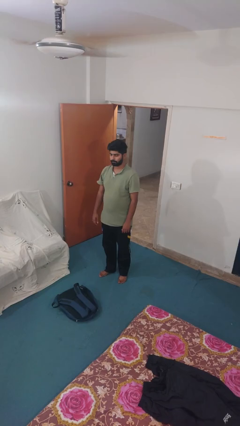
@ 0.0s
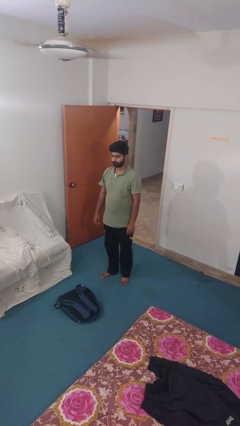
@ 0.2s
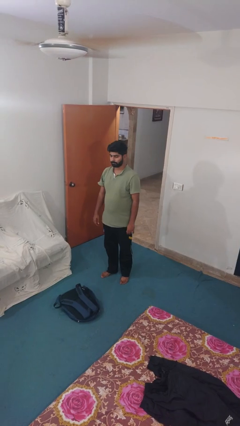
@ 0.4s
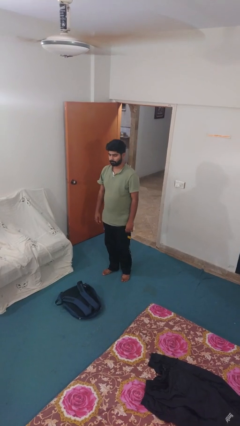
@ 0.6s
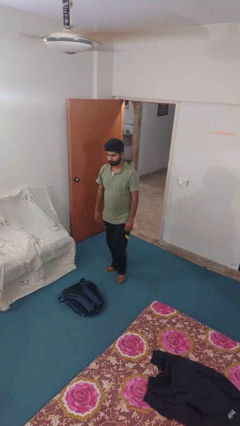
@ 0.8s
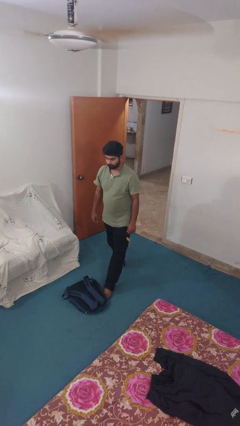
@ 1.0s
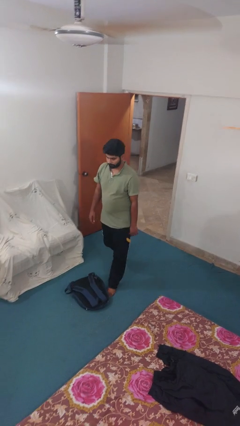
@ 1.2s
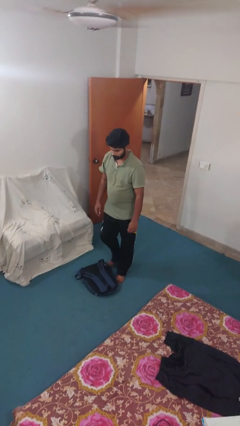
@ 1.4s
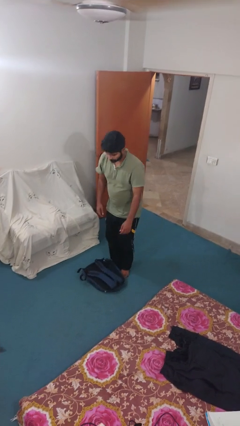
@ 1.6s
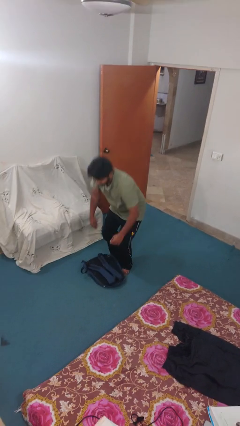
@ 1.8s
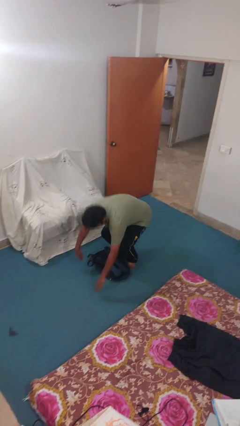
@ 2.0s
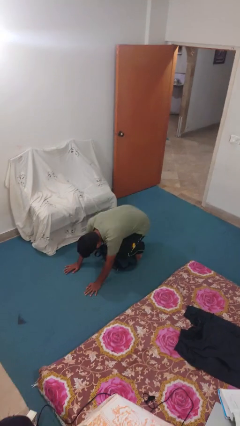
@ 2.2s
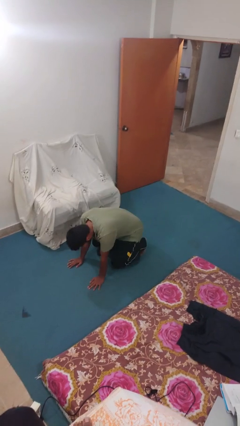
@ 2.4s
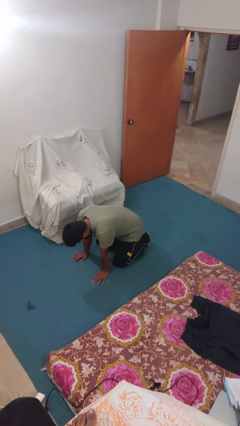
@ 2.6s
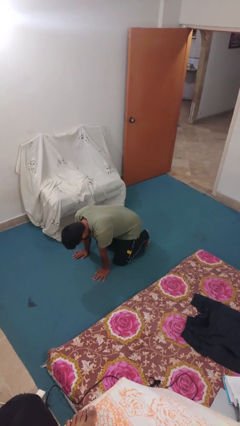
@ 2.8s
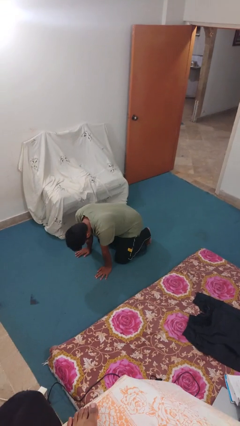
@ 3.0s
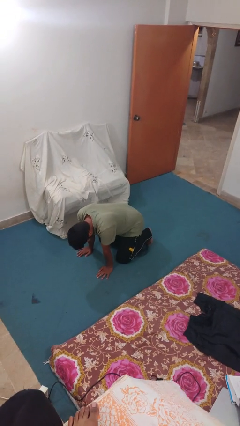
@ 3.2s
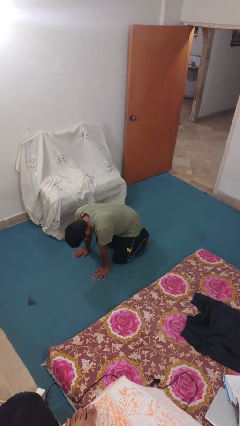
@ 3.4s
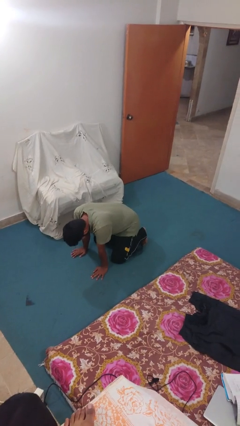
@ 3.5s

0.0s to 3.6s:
person trips on object on floor

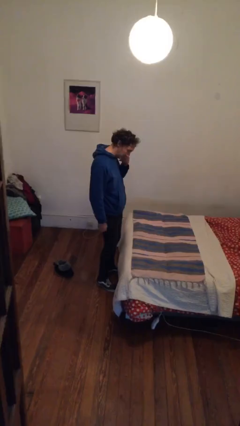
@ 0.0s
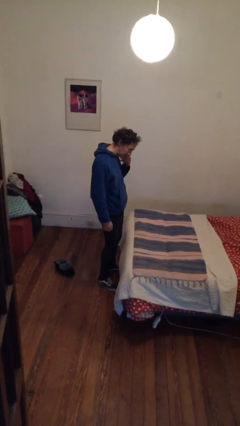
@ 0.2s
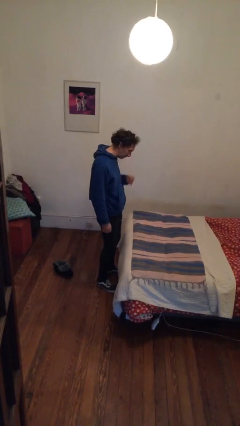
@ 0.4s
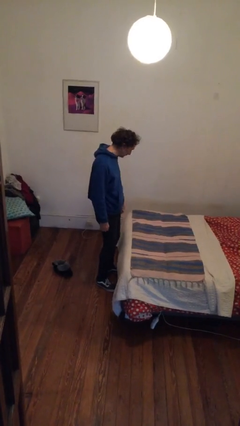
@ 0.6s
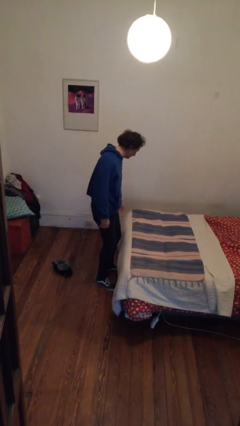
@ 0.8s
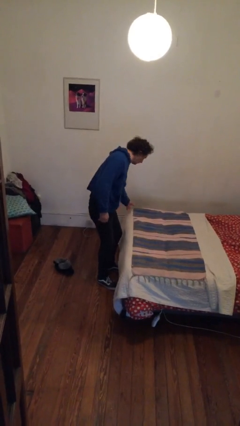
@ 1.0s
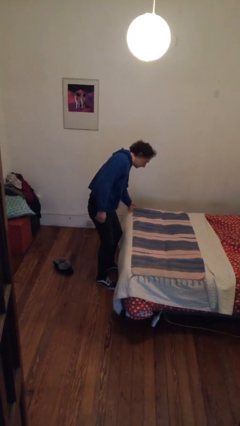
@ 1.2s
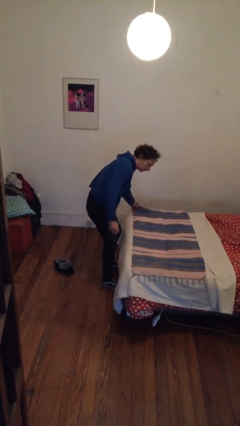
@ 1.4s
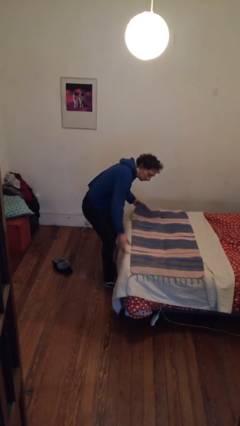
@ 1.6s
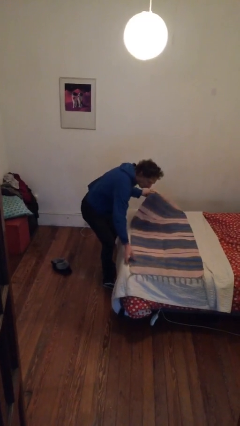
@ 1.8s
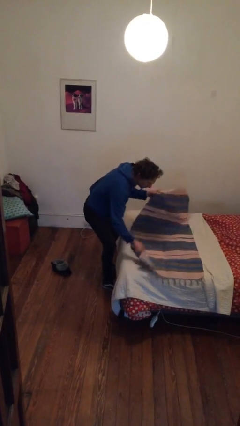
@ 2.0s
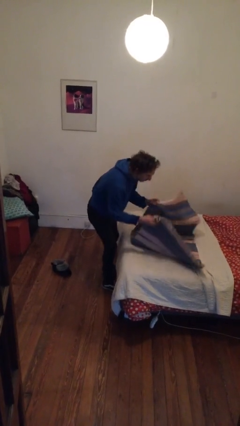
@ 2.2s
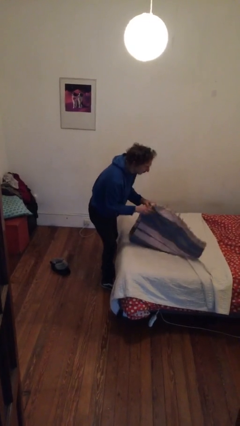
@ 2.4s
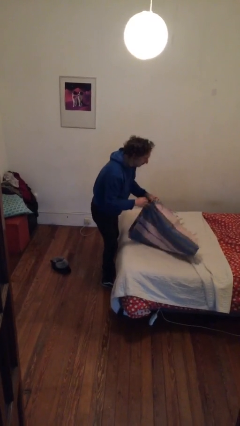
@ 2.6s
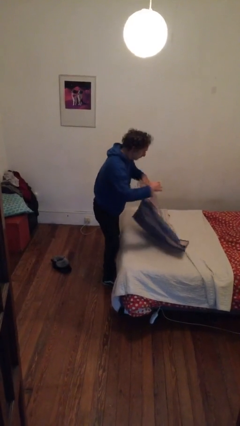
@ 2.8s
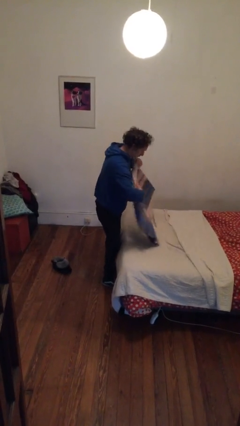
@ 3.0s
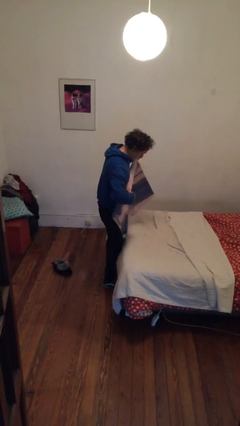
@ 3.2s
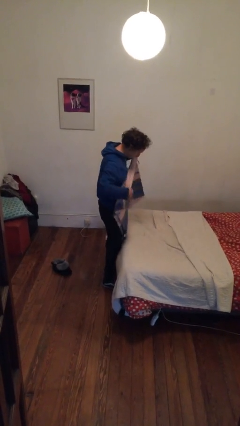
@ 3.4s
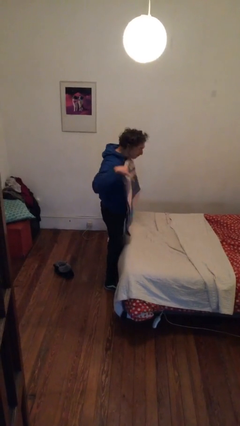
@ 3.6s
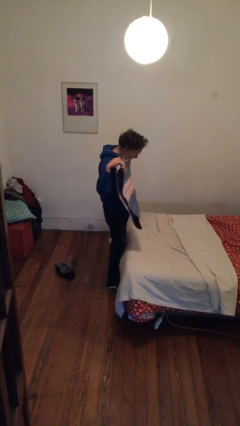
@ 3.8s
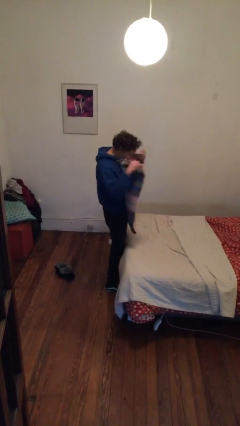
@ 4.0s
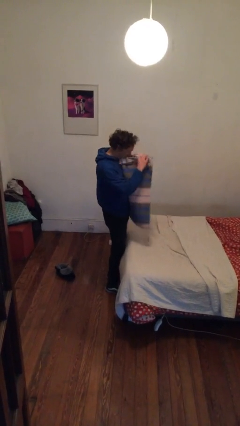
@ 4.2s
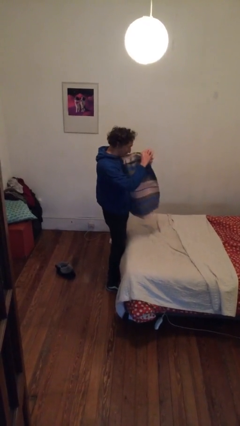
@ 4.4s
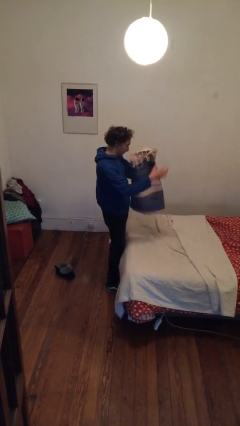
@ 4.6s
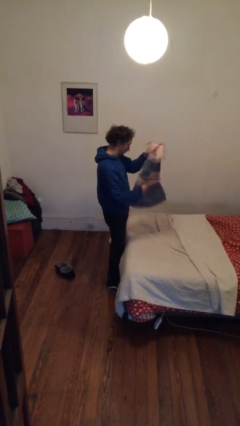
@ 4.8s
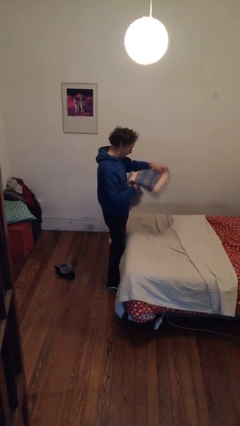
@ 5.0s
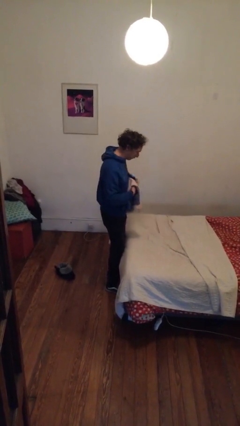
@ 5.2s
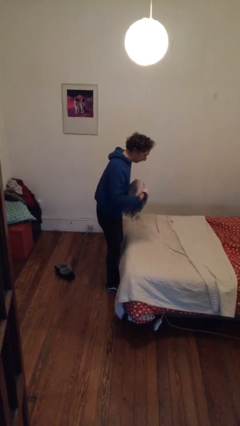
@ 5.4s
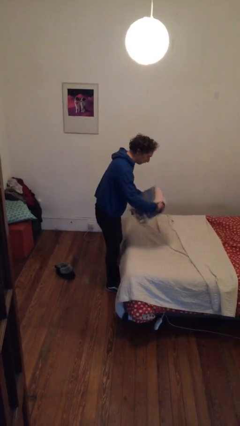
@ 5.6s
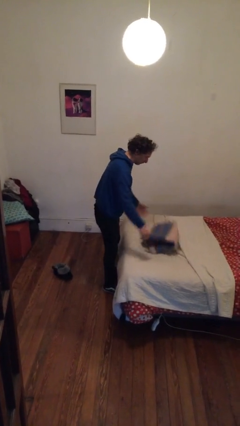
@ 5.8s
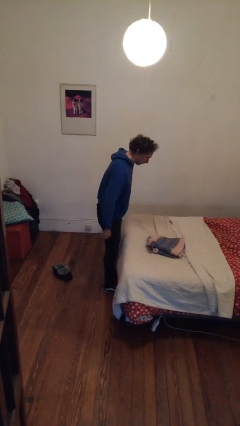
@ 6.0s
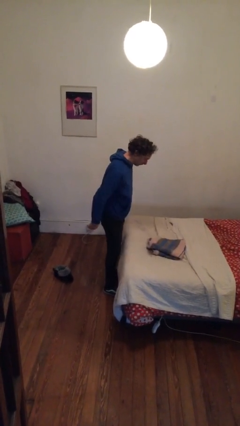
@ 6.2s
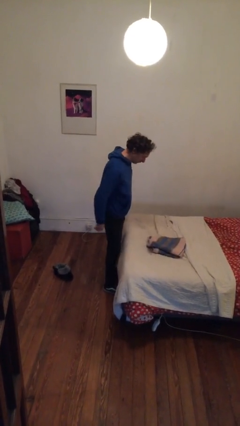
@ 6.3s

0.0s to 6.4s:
person folds blanket

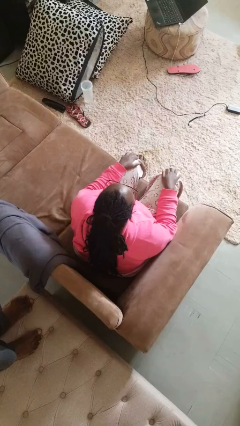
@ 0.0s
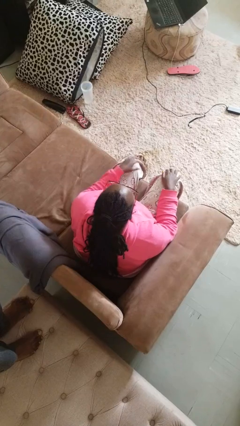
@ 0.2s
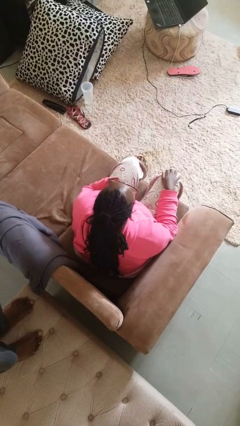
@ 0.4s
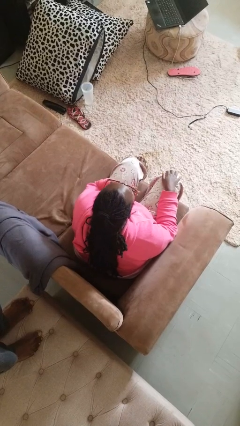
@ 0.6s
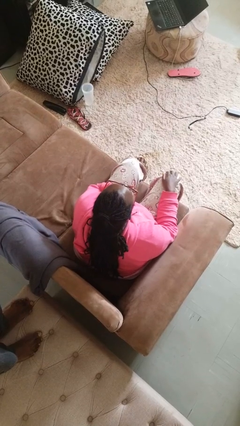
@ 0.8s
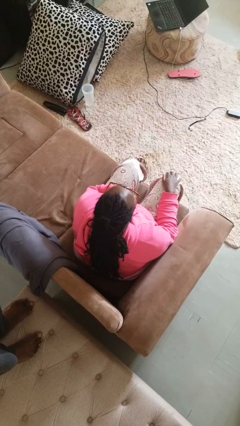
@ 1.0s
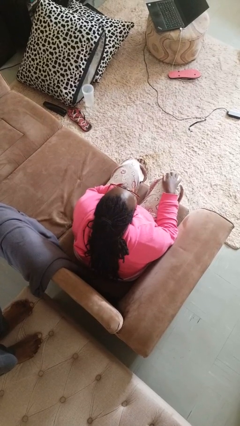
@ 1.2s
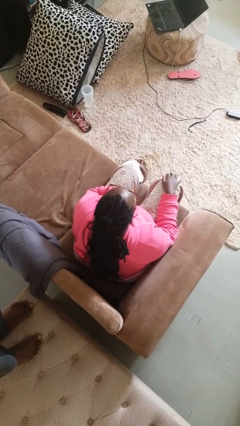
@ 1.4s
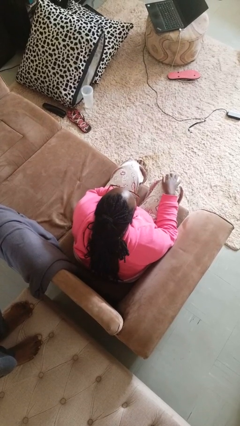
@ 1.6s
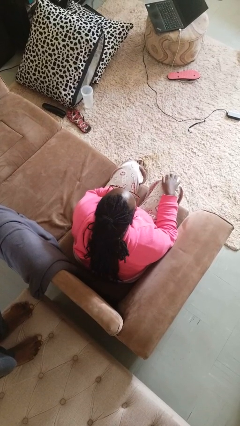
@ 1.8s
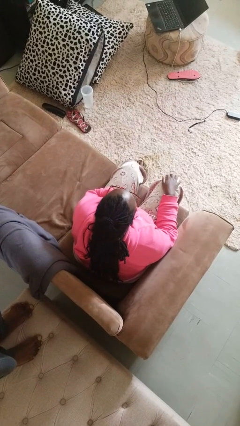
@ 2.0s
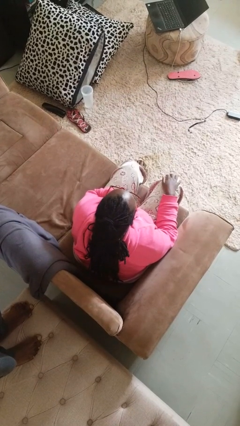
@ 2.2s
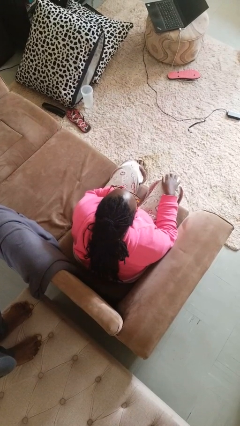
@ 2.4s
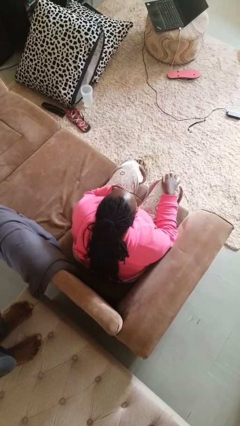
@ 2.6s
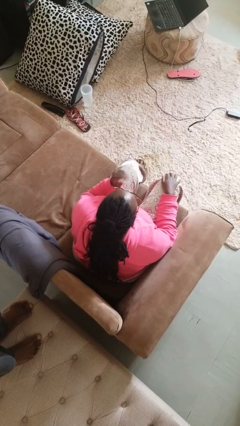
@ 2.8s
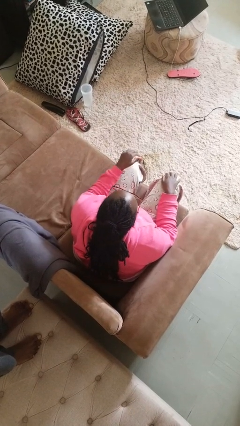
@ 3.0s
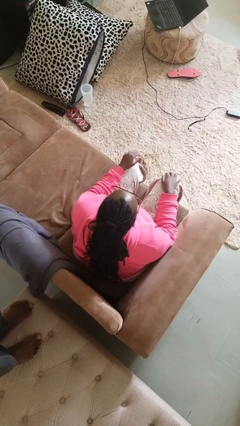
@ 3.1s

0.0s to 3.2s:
person strokes chin

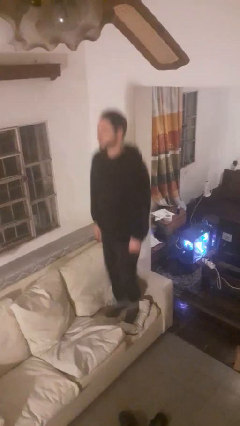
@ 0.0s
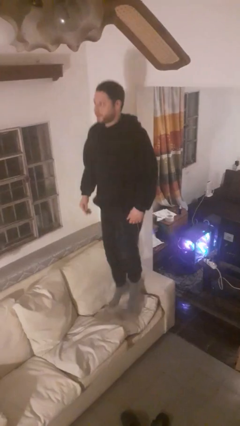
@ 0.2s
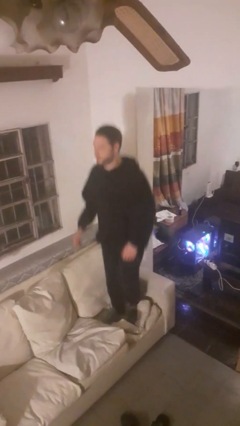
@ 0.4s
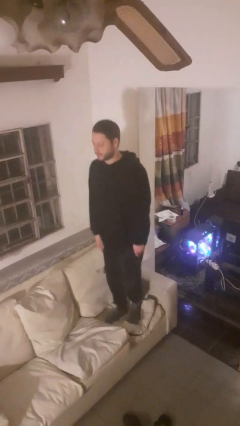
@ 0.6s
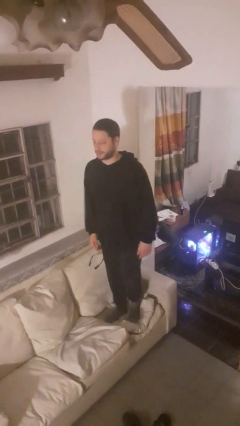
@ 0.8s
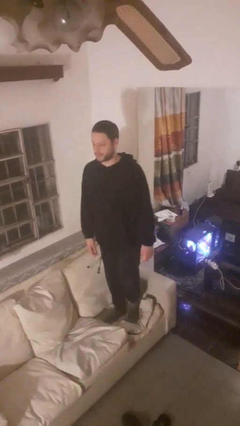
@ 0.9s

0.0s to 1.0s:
person jumps on couch

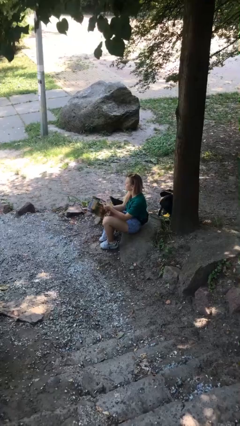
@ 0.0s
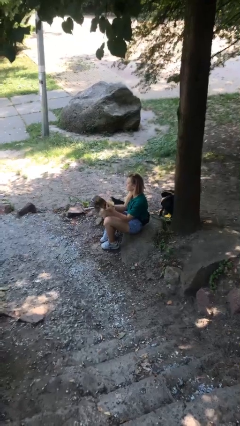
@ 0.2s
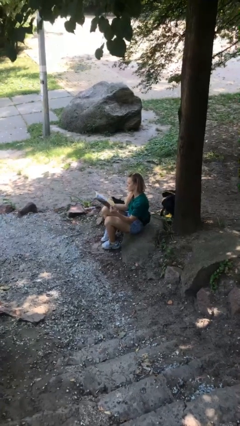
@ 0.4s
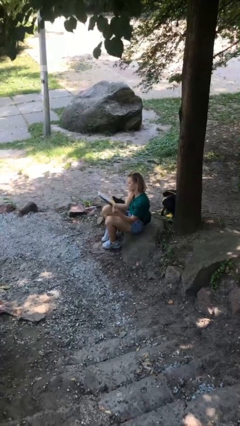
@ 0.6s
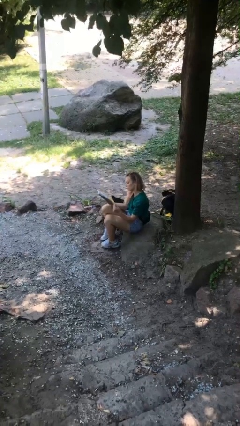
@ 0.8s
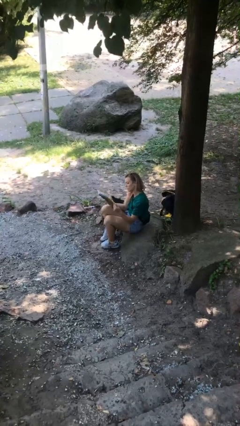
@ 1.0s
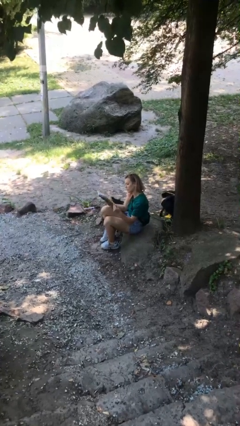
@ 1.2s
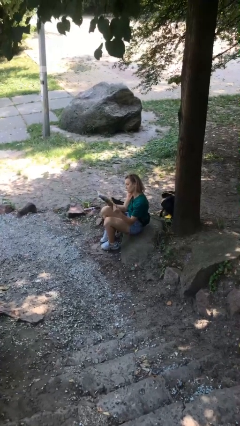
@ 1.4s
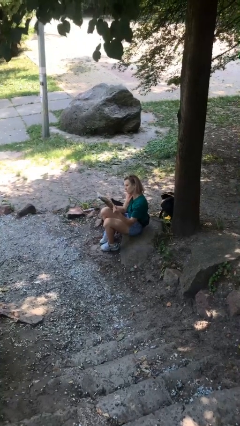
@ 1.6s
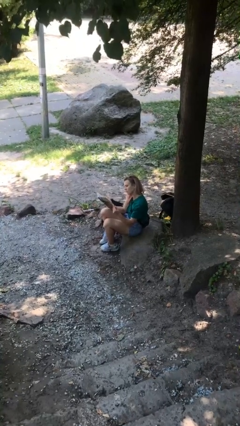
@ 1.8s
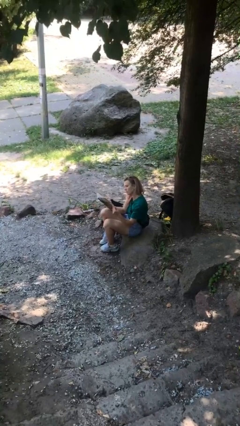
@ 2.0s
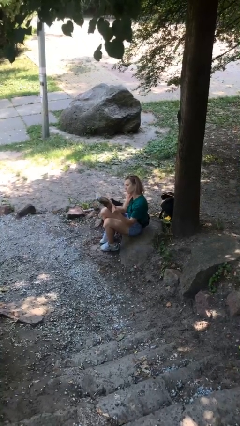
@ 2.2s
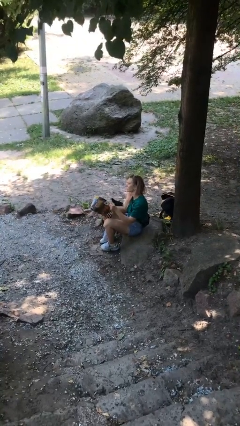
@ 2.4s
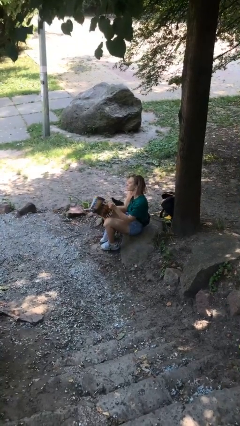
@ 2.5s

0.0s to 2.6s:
person reads magazine

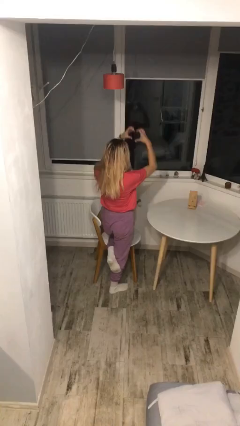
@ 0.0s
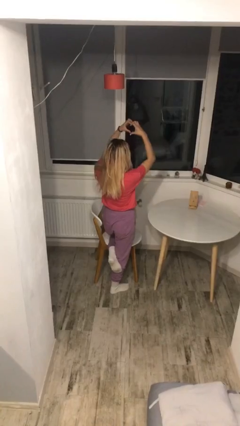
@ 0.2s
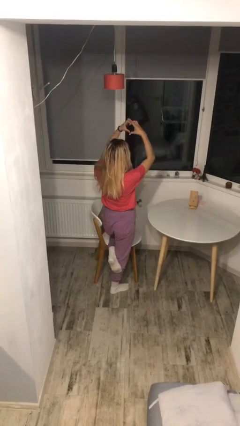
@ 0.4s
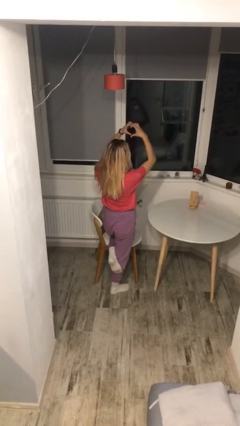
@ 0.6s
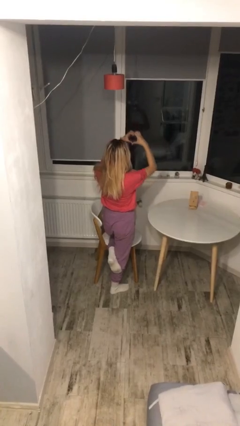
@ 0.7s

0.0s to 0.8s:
person gestures heart
